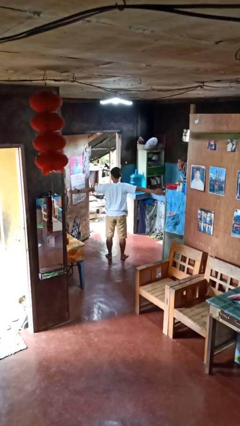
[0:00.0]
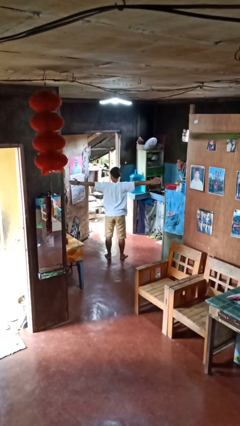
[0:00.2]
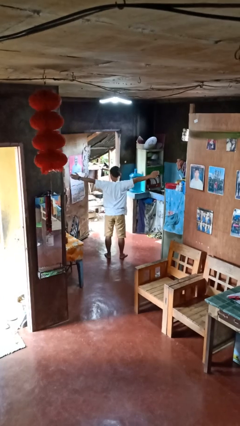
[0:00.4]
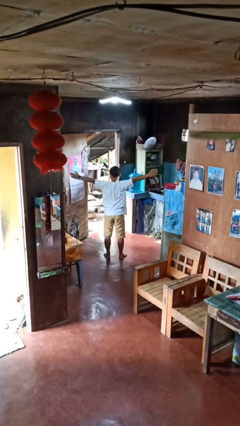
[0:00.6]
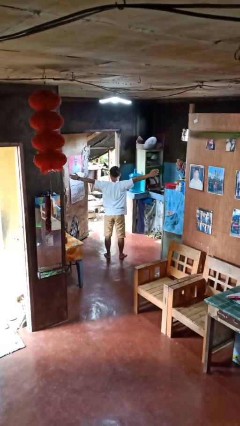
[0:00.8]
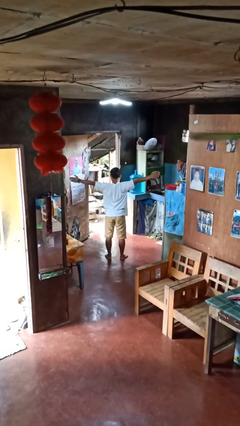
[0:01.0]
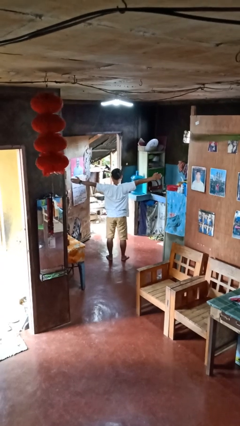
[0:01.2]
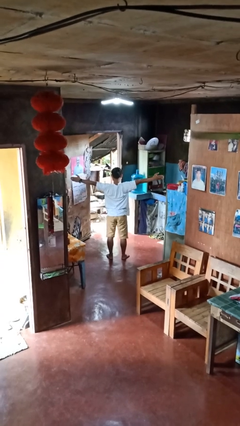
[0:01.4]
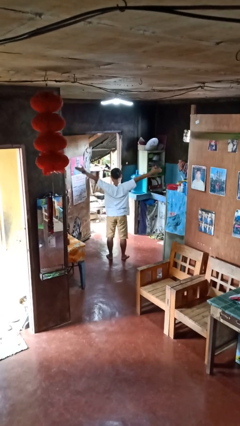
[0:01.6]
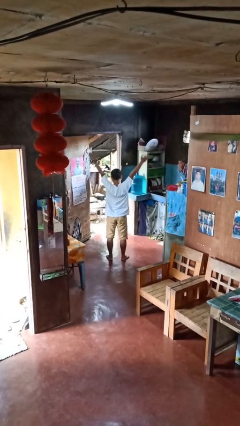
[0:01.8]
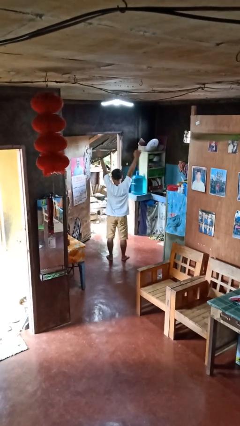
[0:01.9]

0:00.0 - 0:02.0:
person stretches arms to side

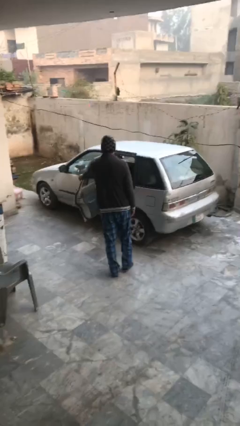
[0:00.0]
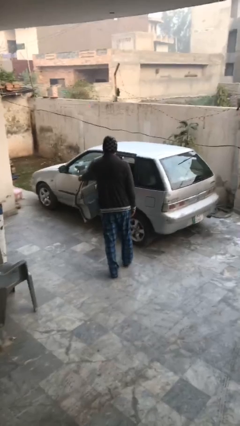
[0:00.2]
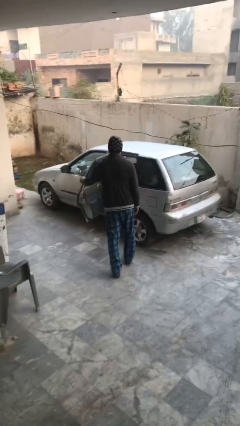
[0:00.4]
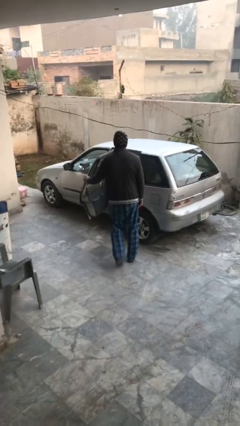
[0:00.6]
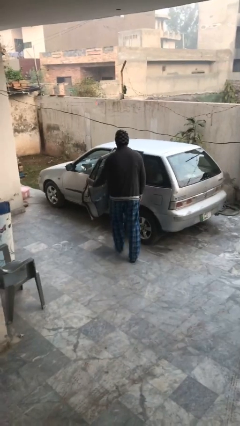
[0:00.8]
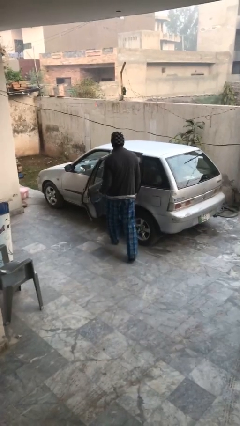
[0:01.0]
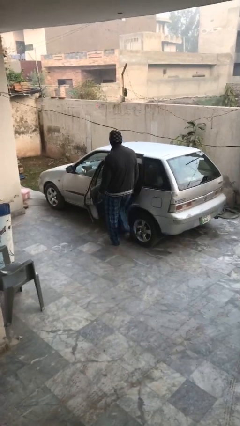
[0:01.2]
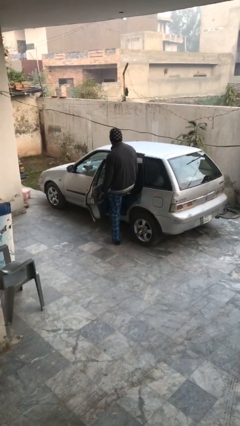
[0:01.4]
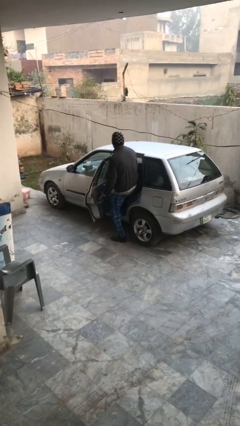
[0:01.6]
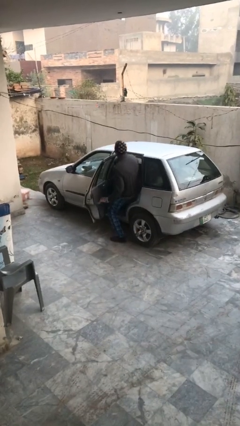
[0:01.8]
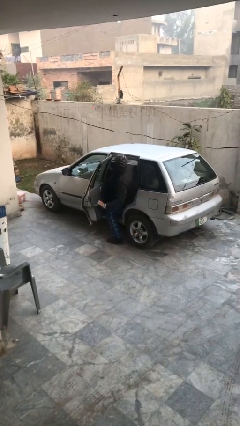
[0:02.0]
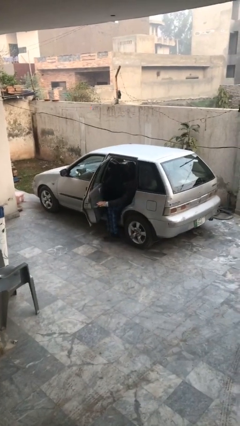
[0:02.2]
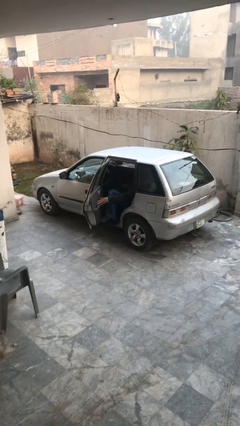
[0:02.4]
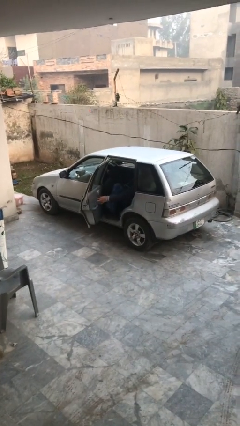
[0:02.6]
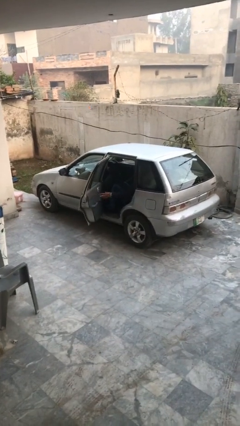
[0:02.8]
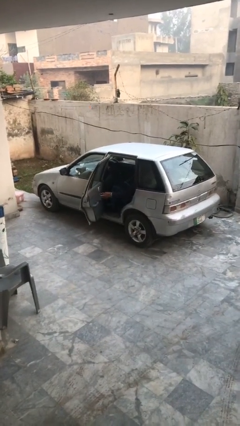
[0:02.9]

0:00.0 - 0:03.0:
person enters car

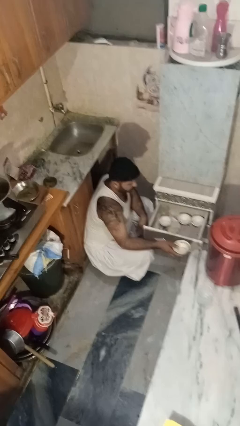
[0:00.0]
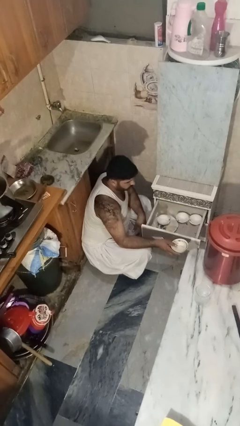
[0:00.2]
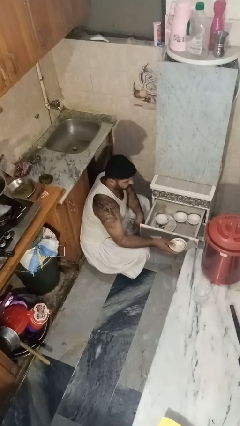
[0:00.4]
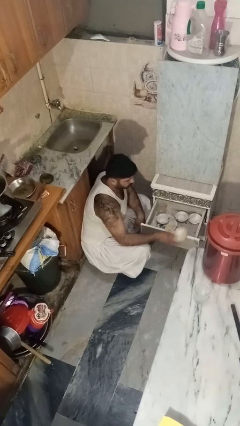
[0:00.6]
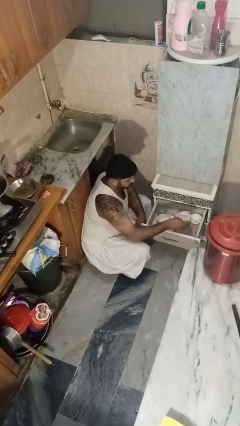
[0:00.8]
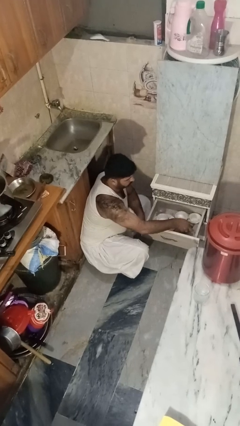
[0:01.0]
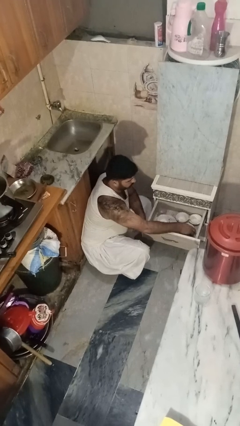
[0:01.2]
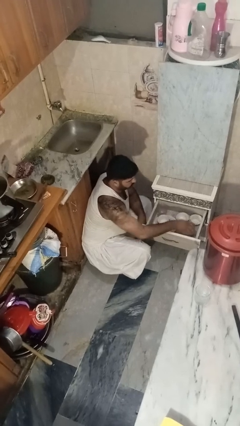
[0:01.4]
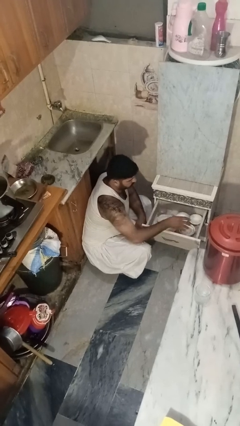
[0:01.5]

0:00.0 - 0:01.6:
person puts object into kitchen drawer

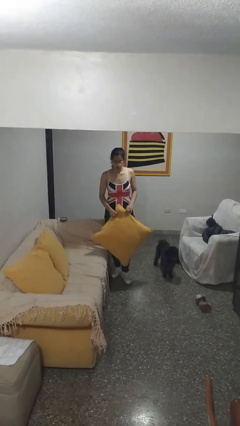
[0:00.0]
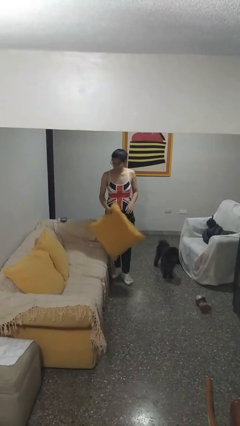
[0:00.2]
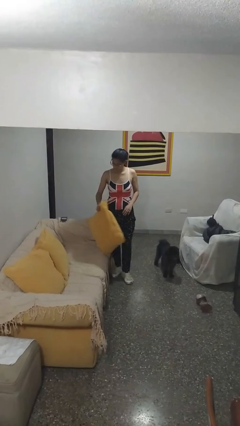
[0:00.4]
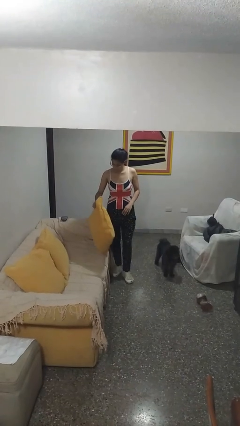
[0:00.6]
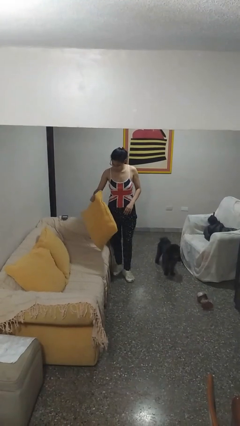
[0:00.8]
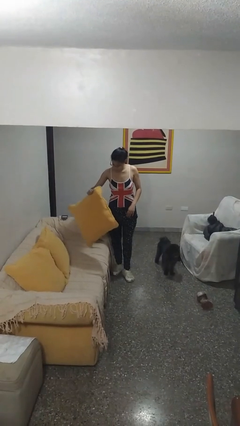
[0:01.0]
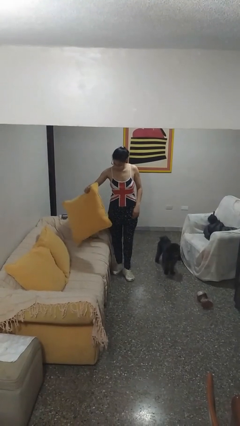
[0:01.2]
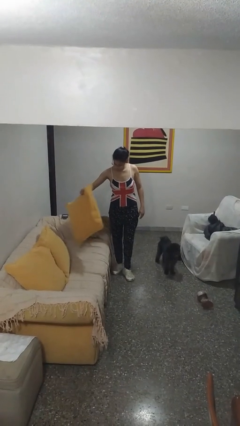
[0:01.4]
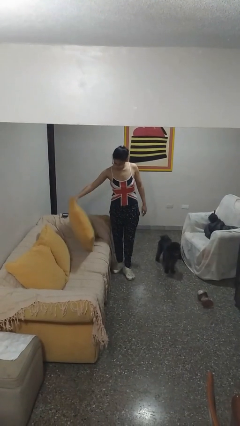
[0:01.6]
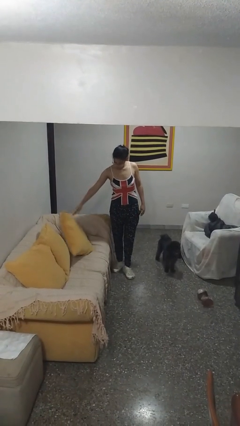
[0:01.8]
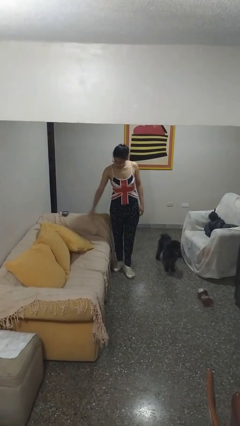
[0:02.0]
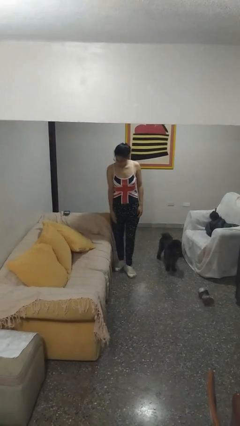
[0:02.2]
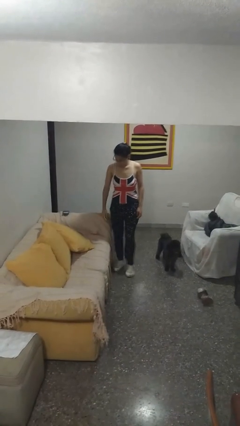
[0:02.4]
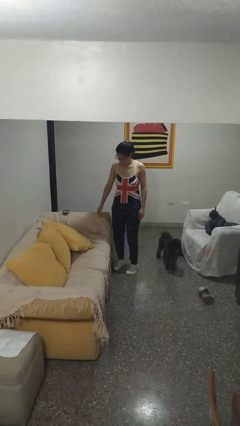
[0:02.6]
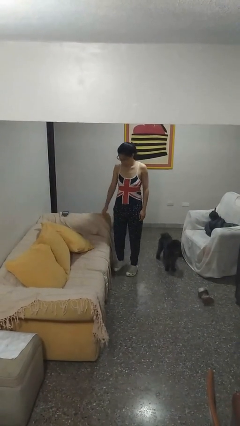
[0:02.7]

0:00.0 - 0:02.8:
person puts down object on couch

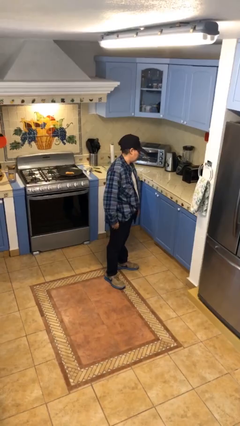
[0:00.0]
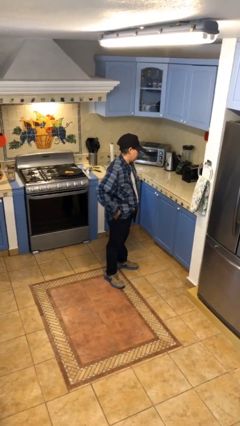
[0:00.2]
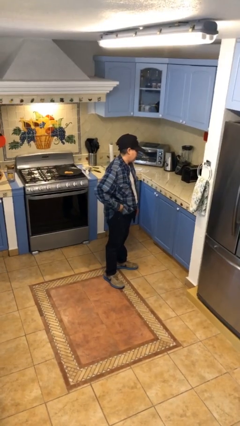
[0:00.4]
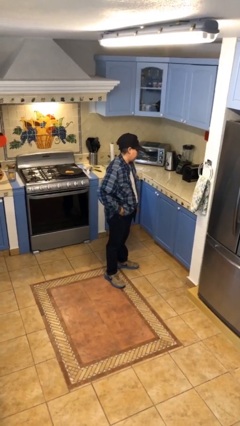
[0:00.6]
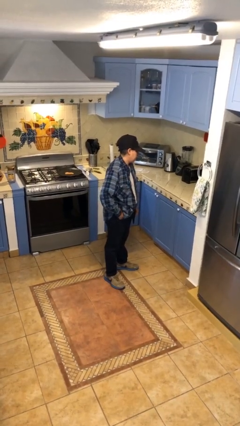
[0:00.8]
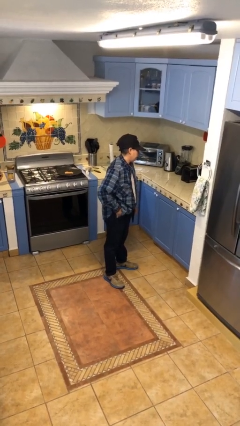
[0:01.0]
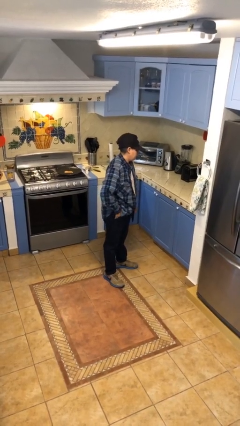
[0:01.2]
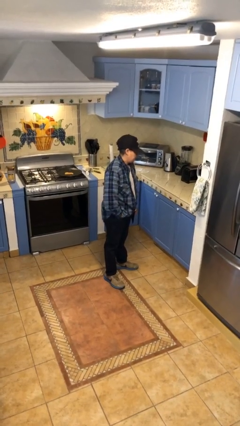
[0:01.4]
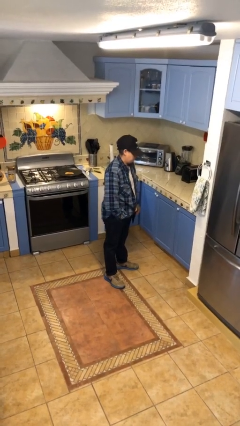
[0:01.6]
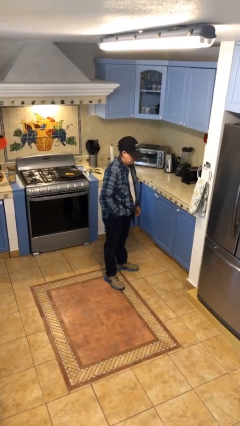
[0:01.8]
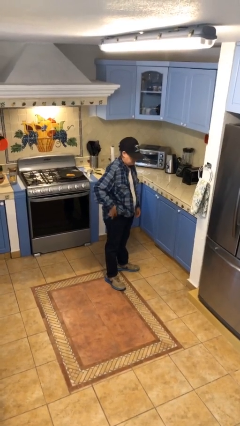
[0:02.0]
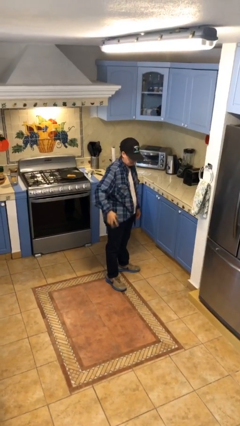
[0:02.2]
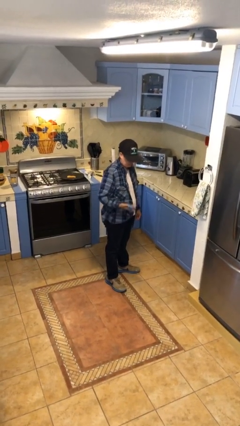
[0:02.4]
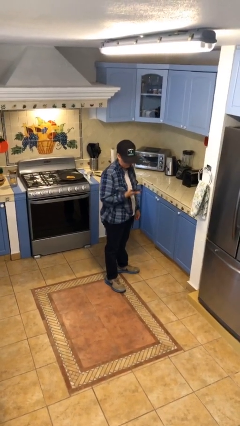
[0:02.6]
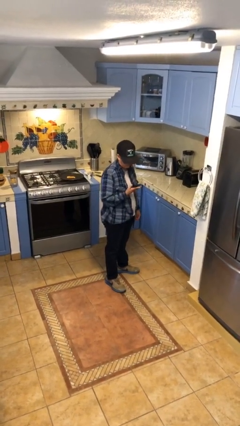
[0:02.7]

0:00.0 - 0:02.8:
person takes phone from pocket

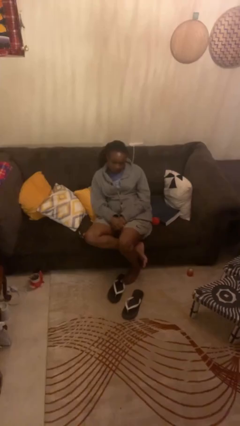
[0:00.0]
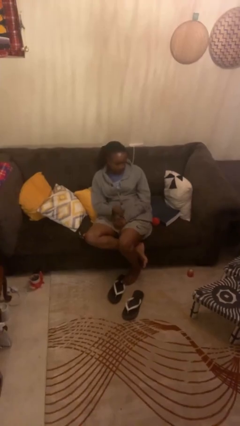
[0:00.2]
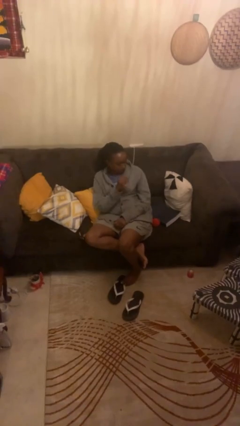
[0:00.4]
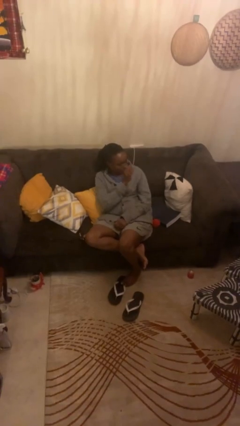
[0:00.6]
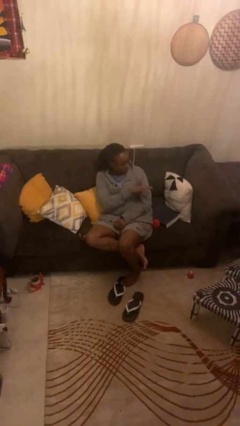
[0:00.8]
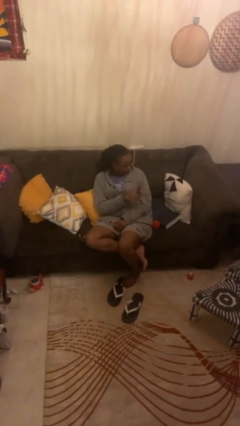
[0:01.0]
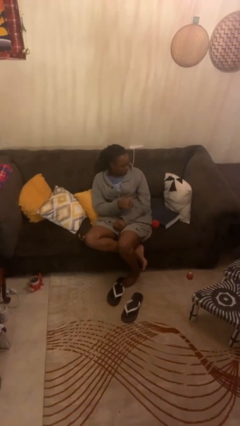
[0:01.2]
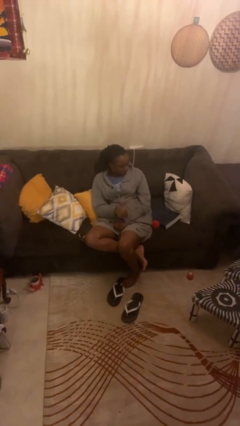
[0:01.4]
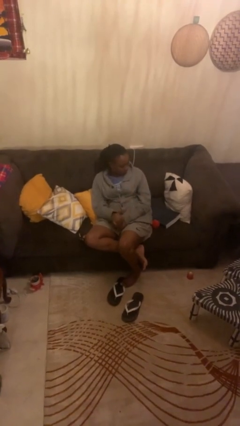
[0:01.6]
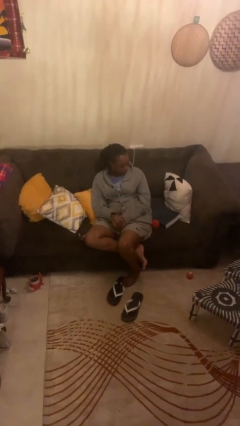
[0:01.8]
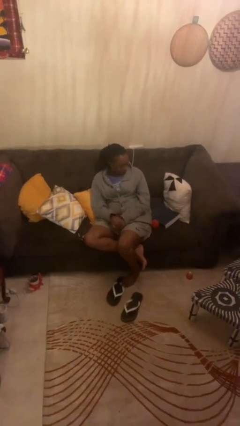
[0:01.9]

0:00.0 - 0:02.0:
person swats bug

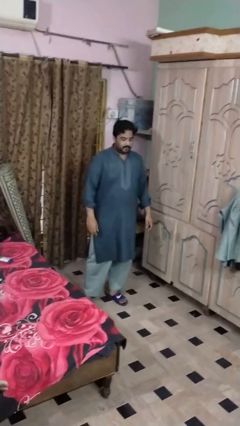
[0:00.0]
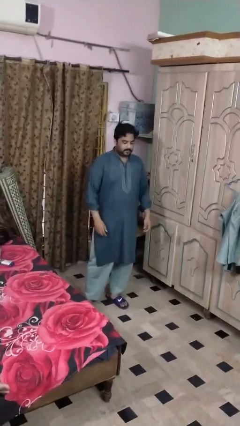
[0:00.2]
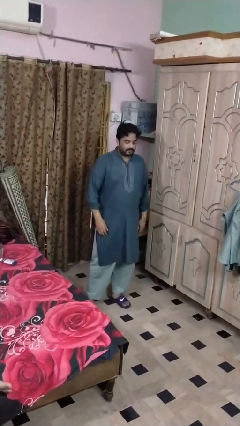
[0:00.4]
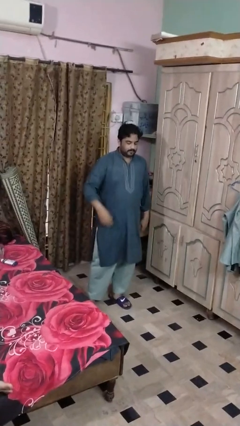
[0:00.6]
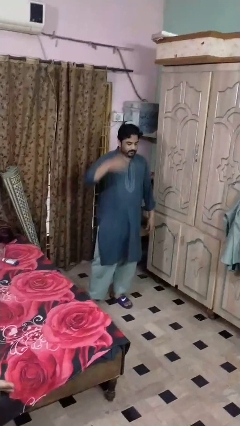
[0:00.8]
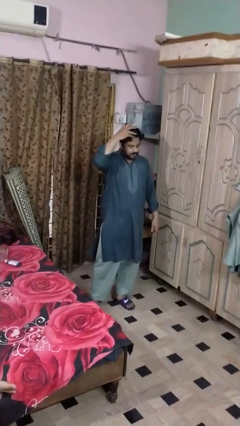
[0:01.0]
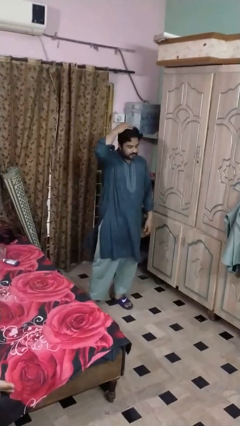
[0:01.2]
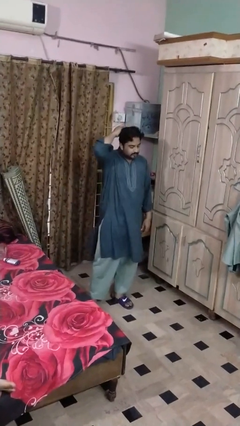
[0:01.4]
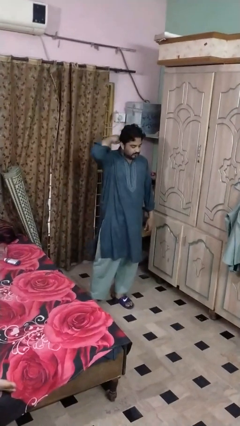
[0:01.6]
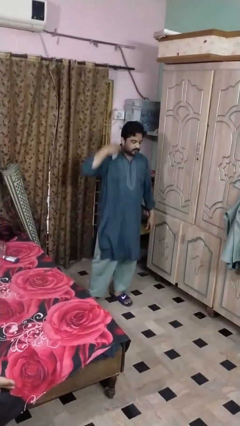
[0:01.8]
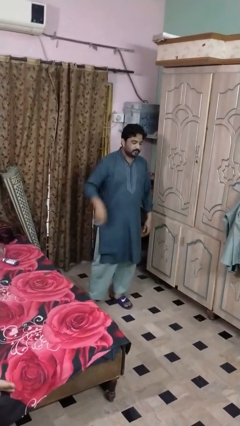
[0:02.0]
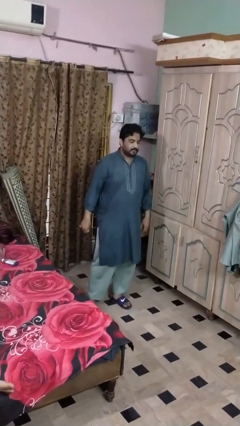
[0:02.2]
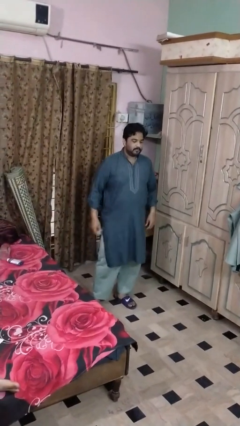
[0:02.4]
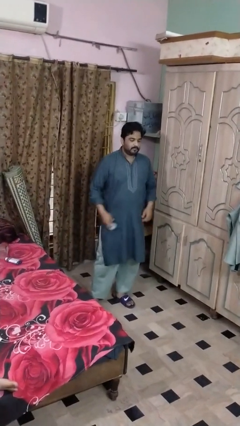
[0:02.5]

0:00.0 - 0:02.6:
person takes off hairtie

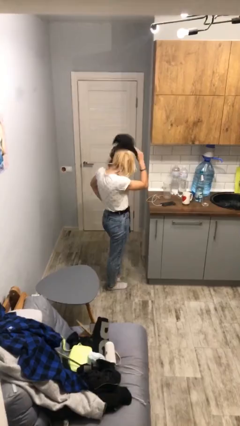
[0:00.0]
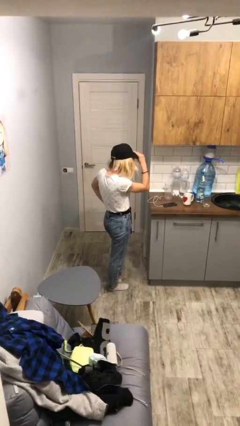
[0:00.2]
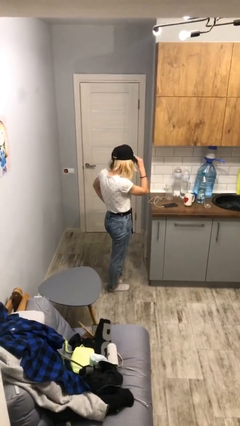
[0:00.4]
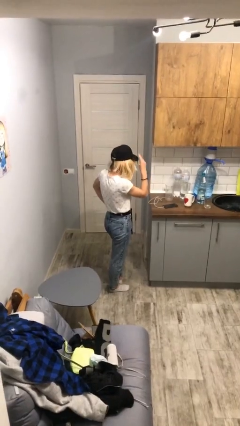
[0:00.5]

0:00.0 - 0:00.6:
person puts on hat
